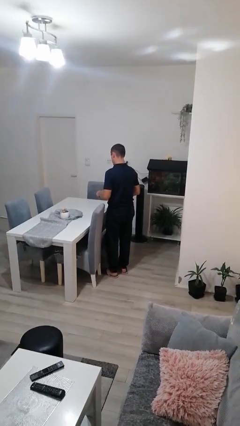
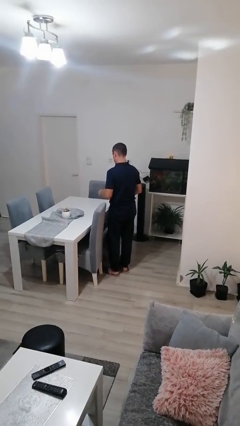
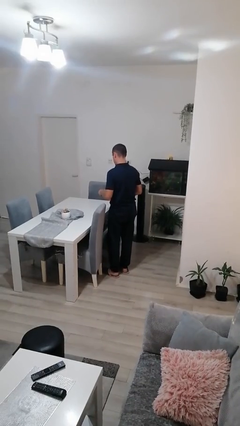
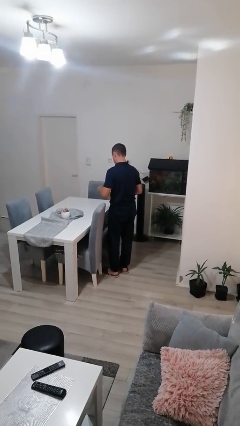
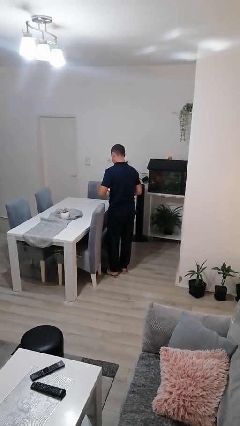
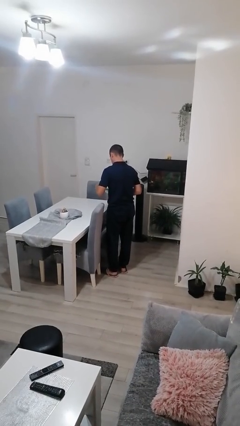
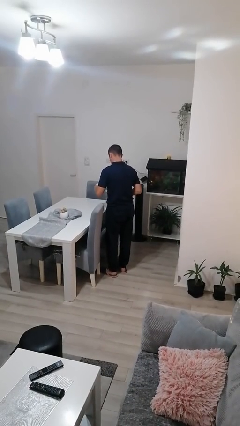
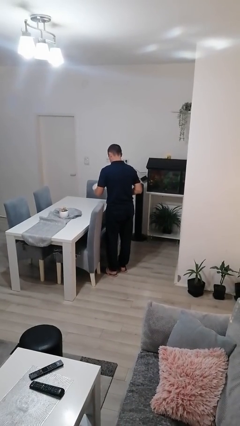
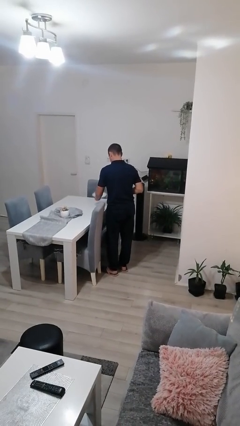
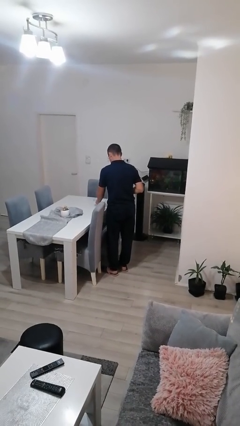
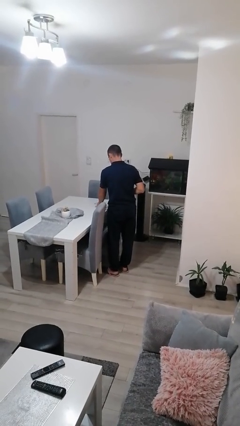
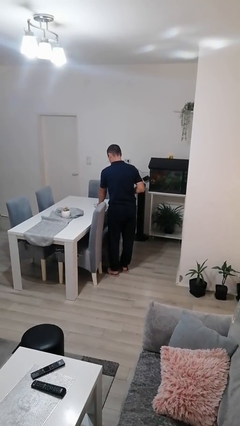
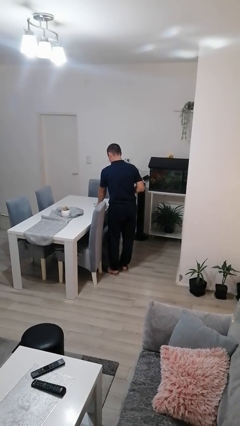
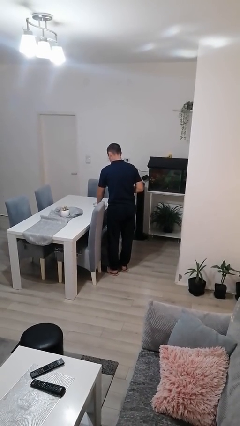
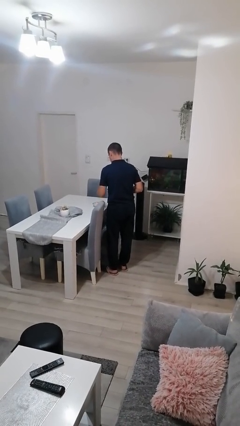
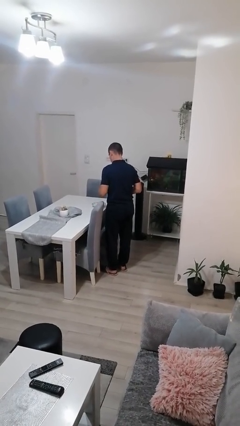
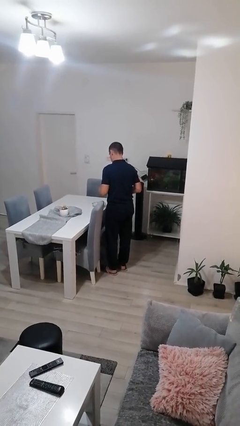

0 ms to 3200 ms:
person sets table

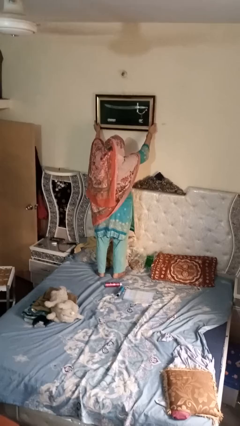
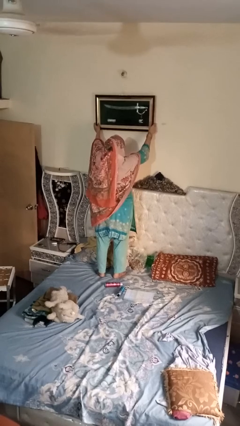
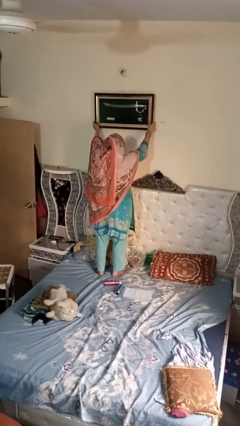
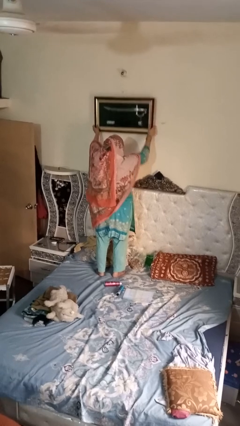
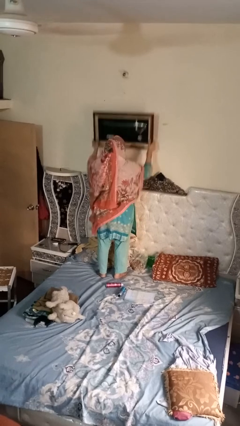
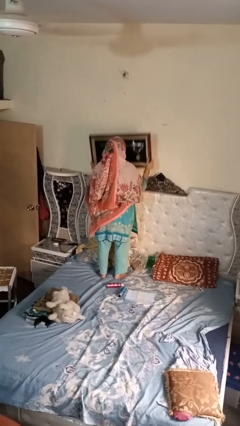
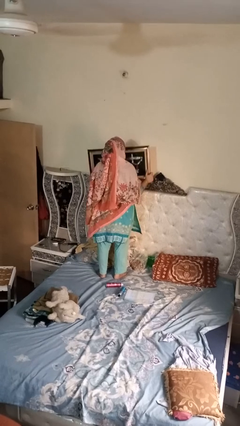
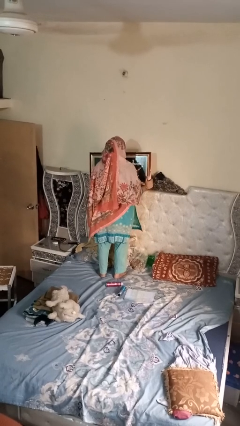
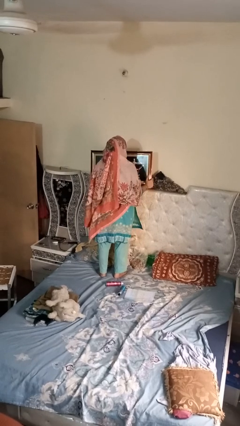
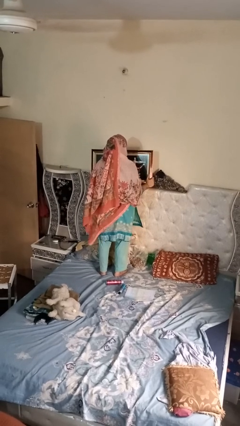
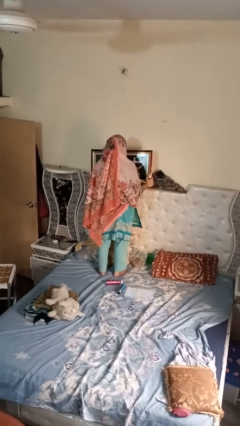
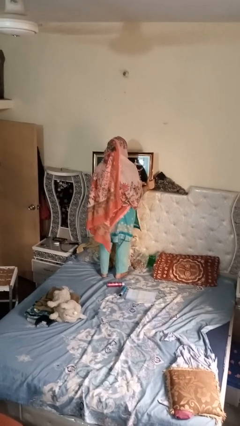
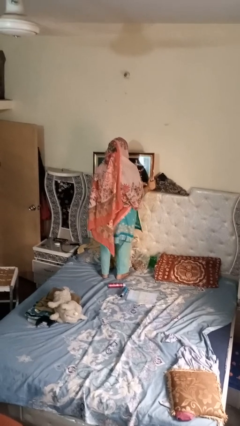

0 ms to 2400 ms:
person puts up picture frame

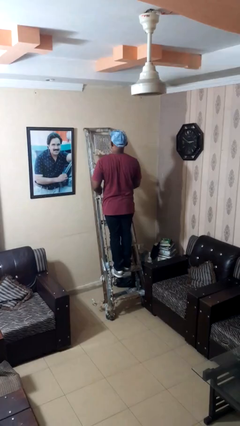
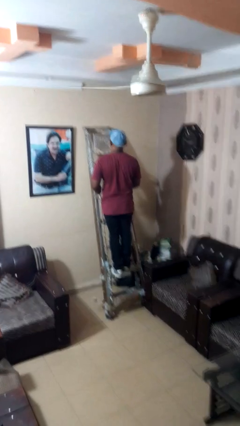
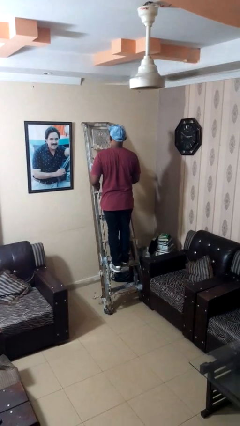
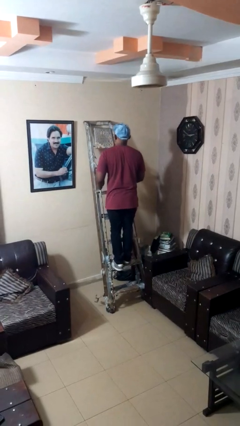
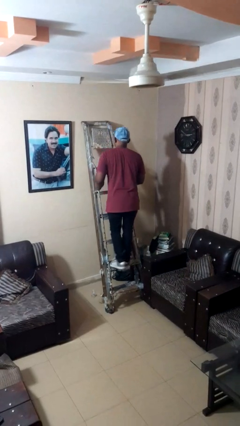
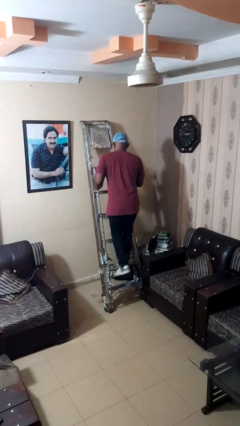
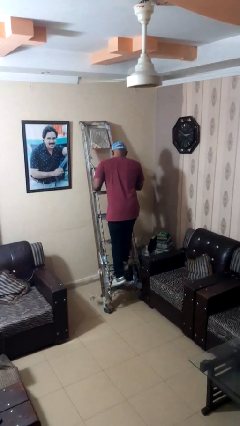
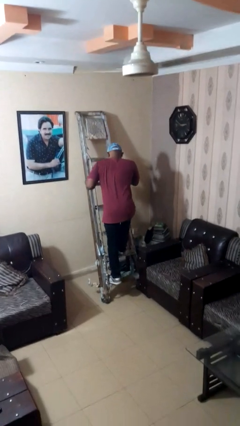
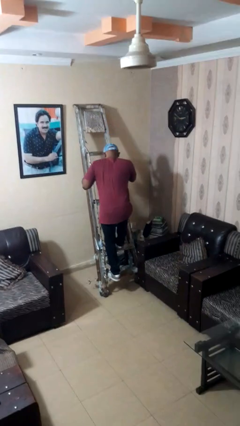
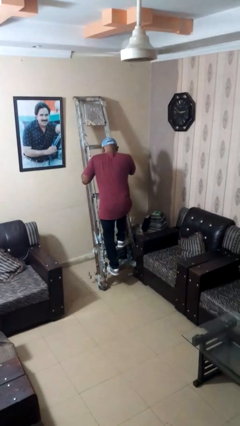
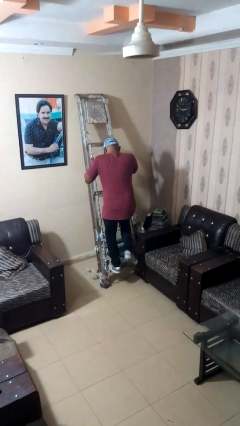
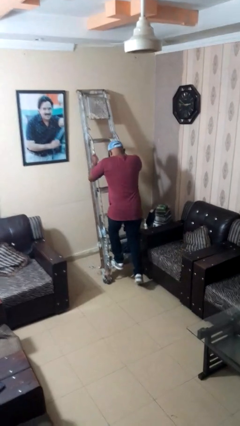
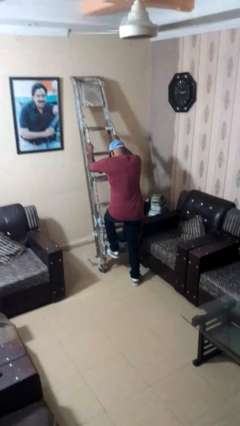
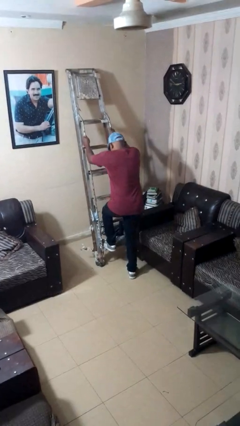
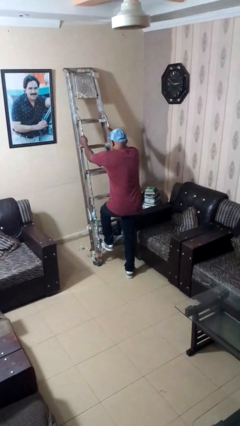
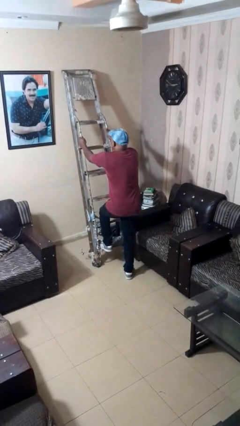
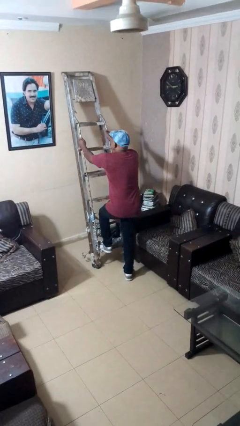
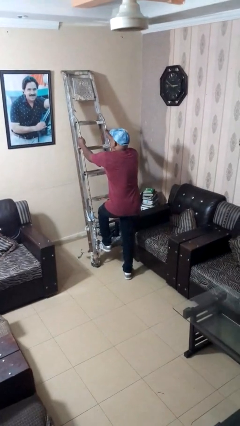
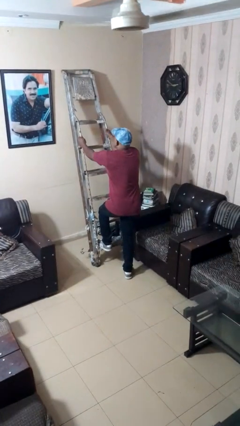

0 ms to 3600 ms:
person climbs down ladder

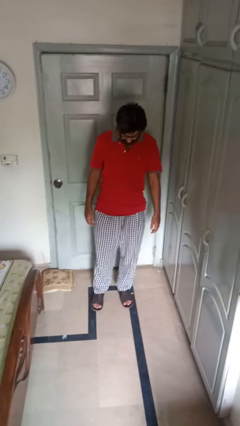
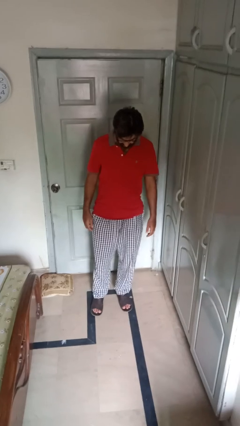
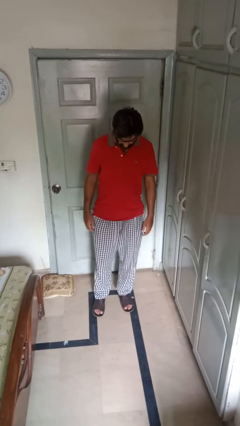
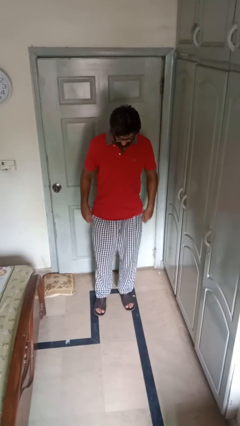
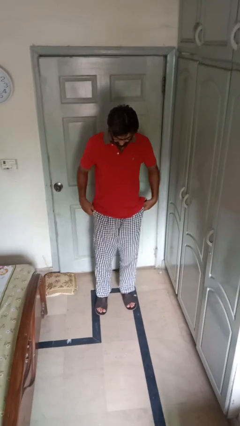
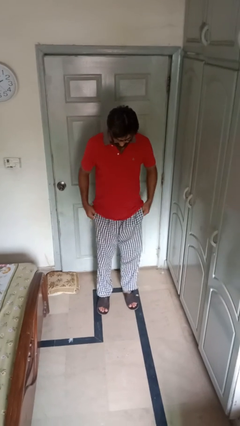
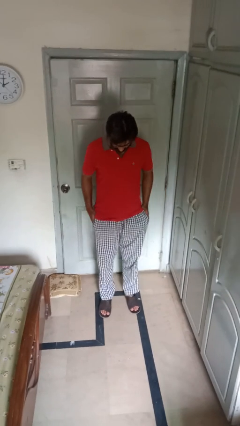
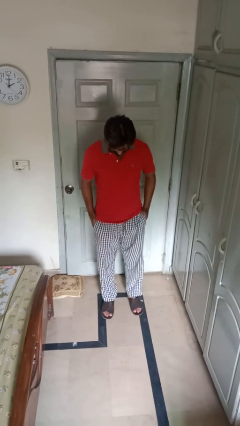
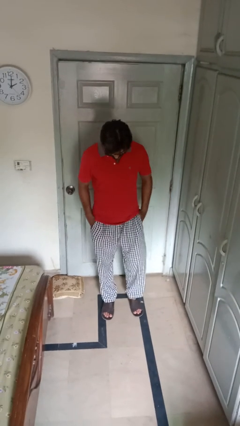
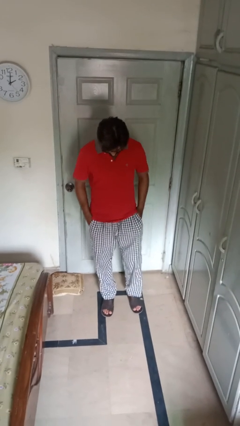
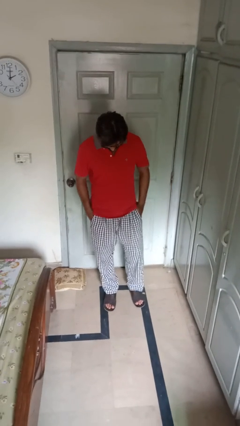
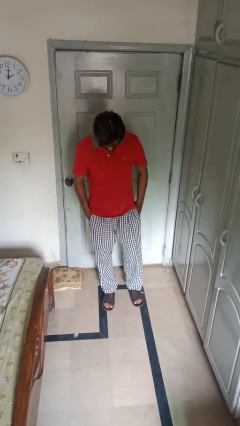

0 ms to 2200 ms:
person puts hands in back pockets

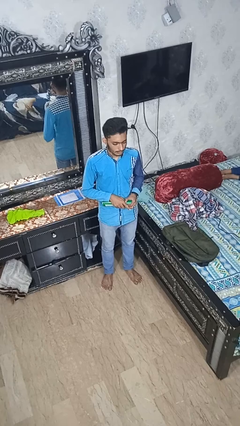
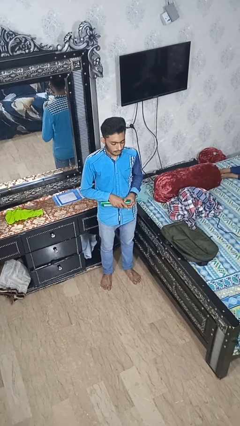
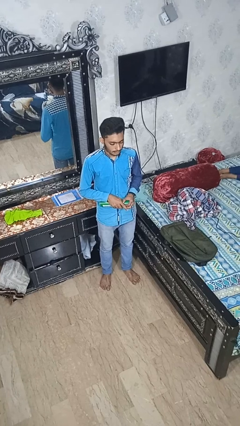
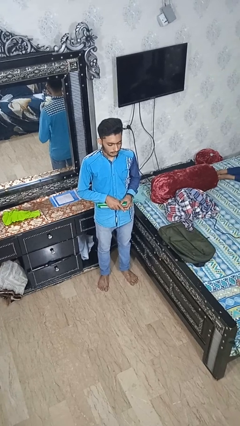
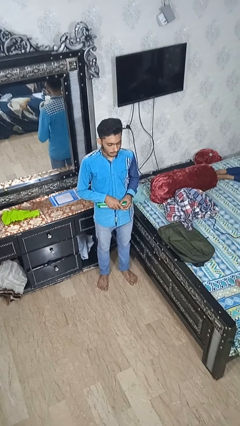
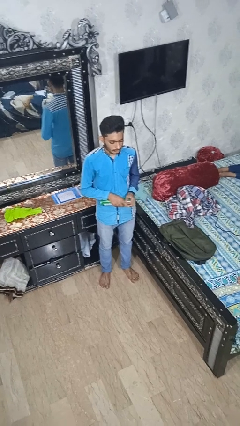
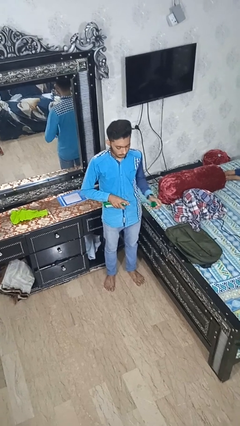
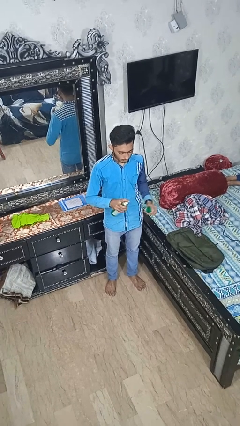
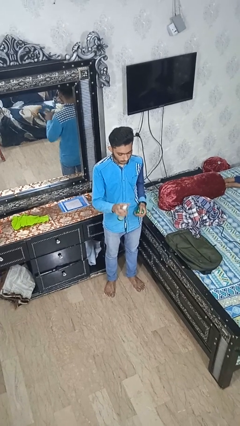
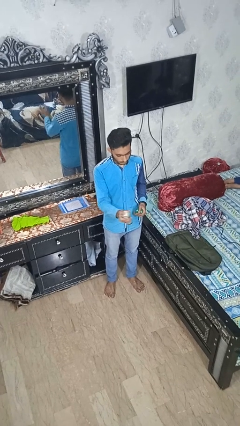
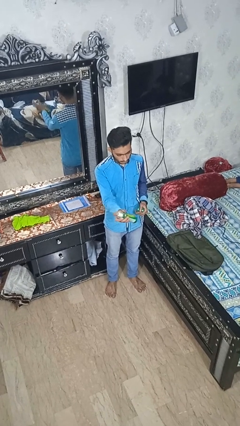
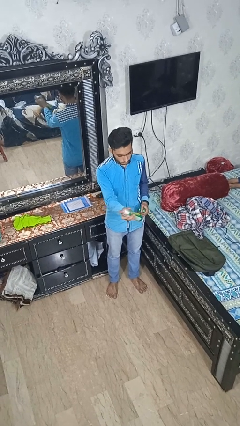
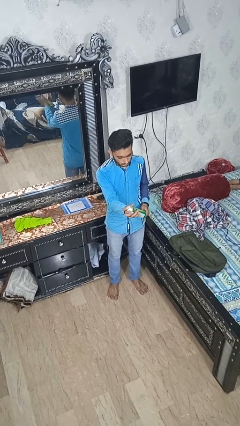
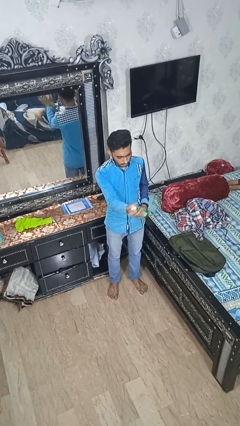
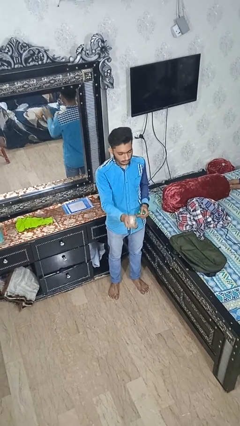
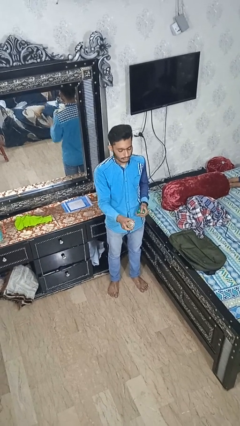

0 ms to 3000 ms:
person sprays from bottle

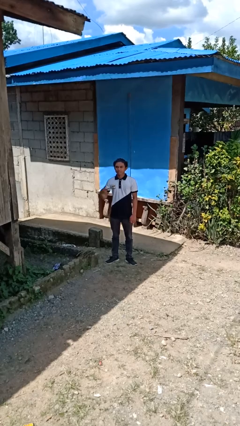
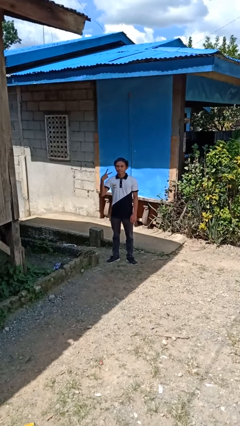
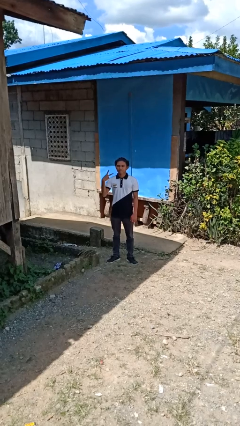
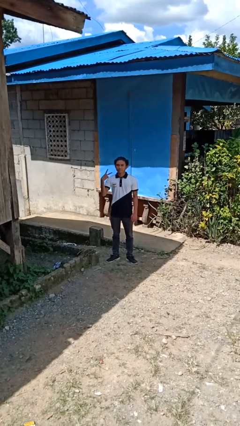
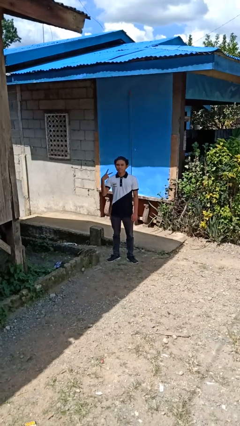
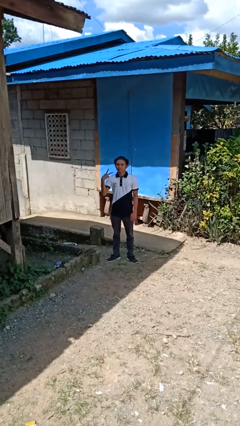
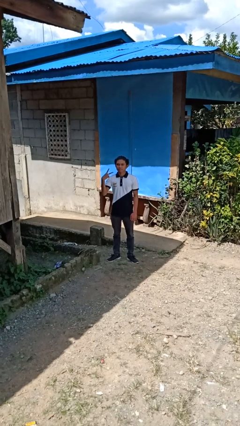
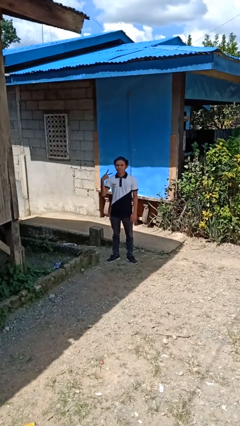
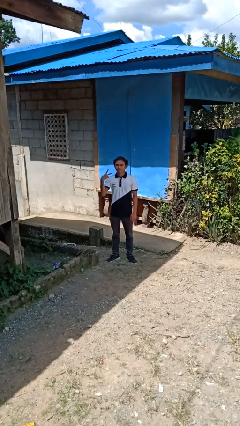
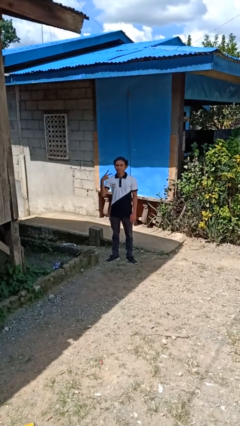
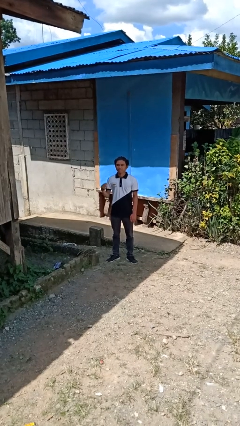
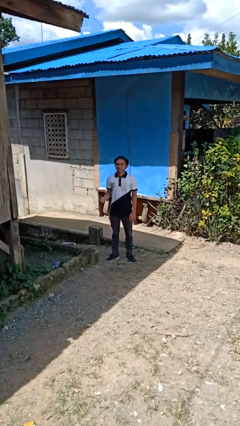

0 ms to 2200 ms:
person gestures peace

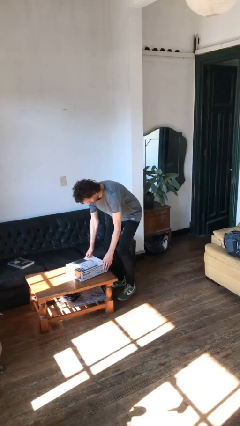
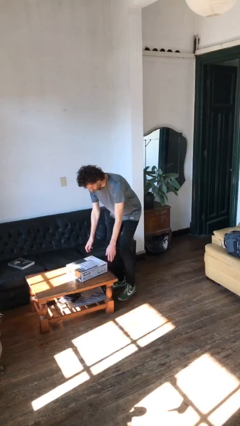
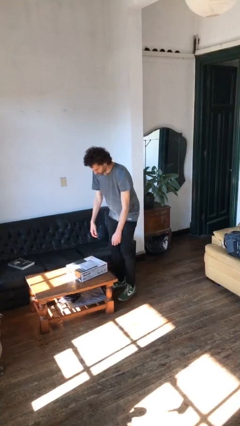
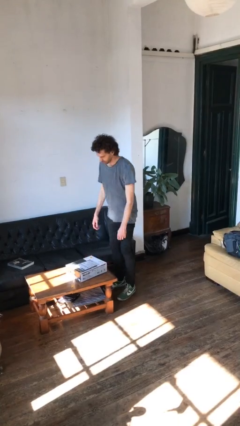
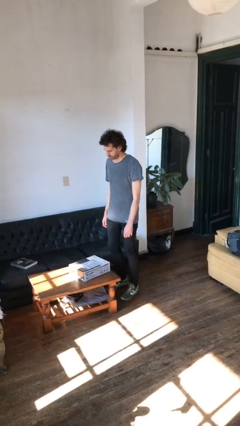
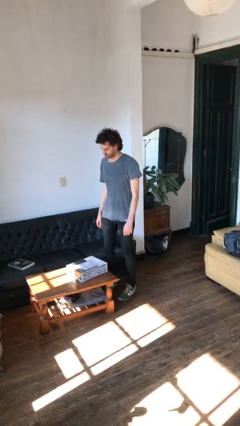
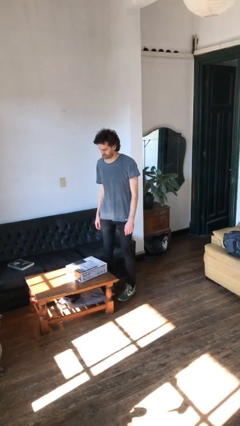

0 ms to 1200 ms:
person puts down object on table
